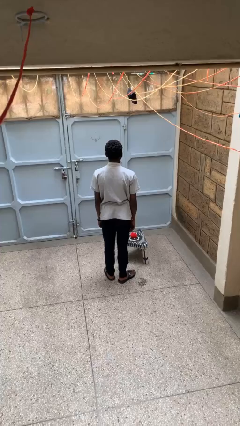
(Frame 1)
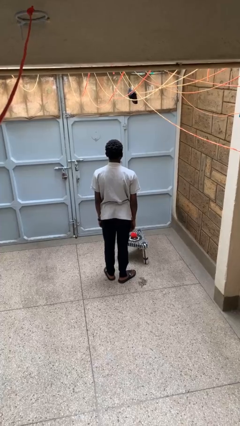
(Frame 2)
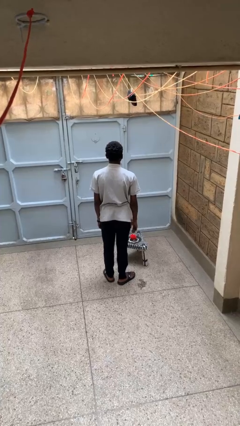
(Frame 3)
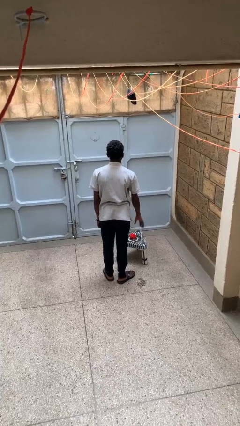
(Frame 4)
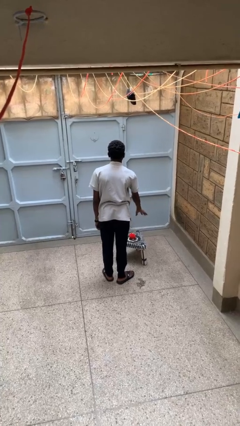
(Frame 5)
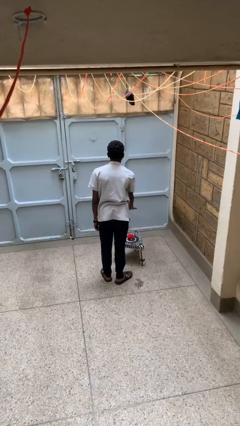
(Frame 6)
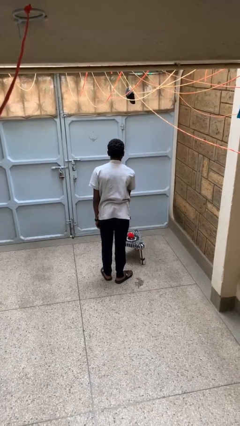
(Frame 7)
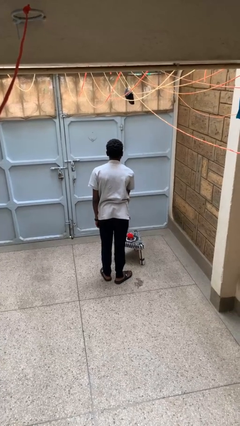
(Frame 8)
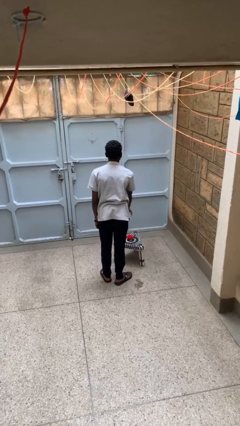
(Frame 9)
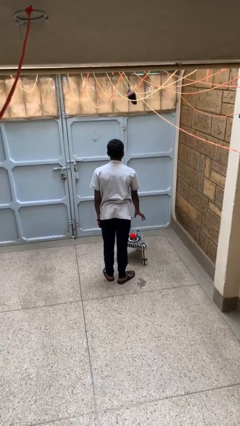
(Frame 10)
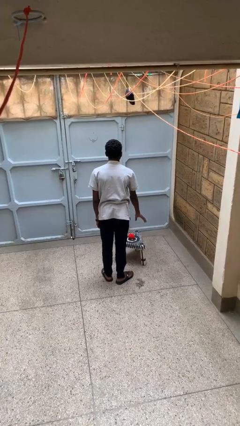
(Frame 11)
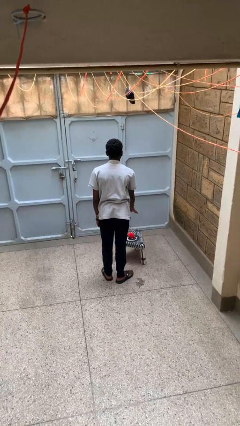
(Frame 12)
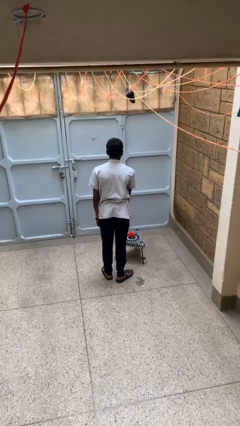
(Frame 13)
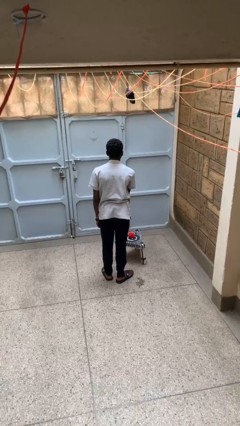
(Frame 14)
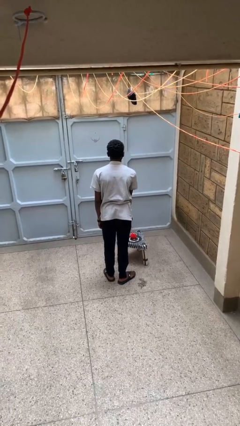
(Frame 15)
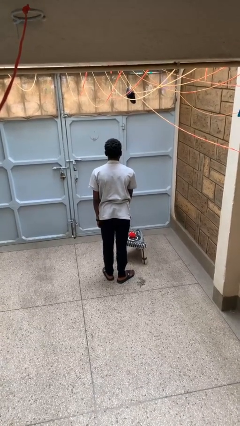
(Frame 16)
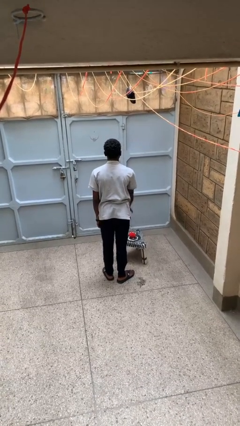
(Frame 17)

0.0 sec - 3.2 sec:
person waves hand over object

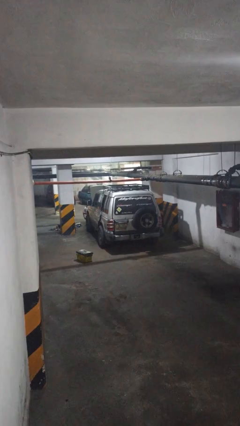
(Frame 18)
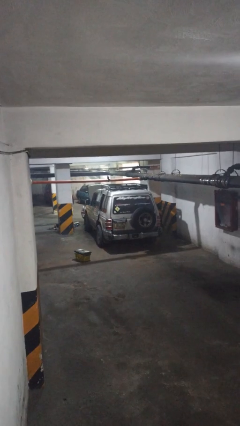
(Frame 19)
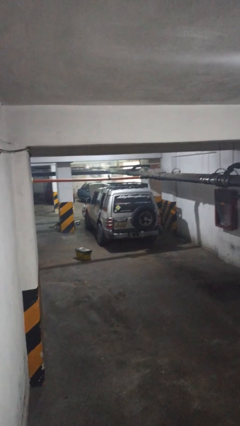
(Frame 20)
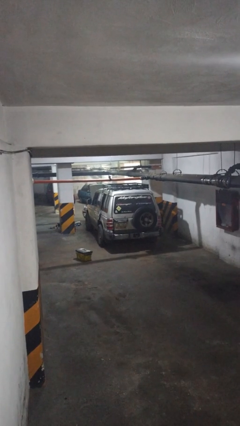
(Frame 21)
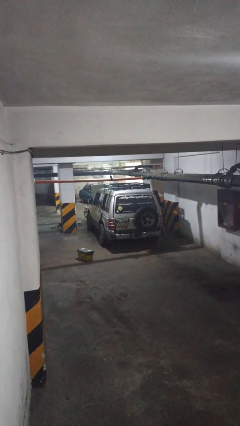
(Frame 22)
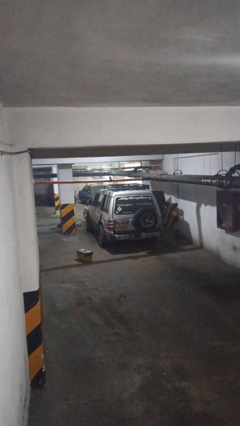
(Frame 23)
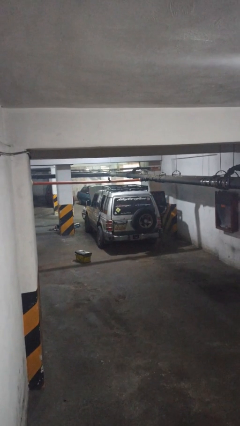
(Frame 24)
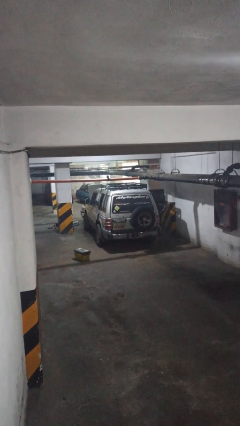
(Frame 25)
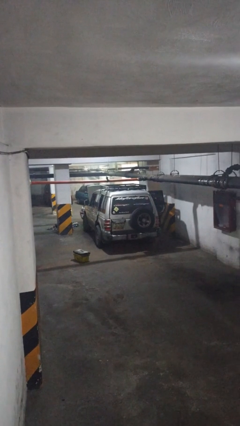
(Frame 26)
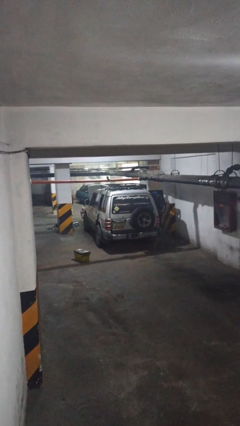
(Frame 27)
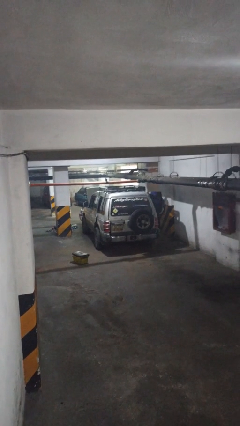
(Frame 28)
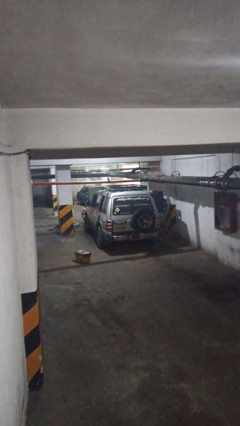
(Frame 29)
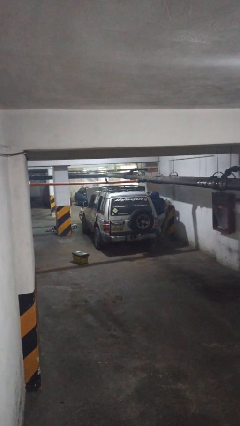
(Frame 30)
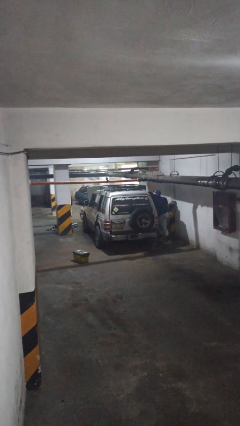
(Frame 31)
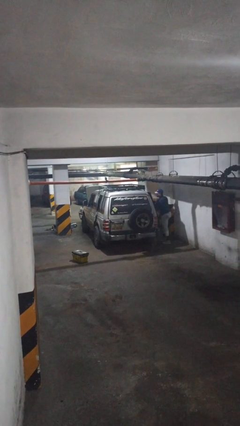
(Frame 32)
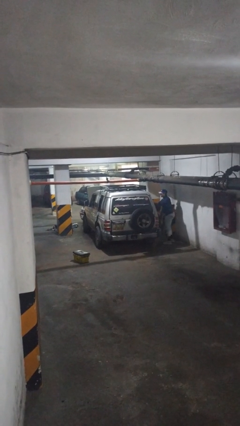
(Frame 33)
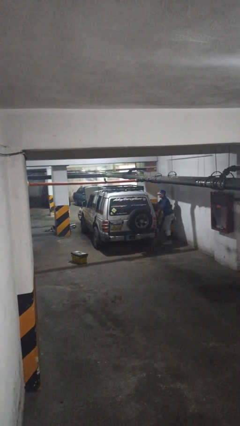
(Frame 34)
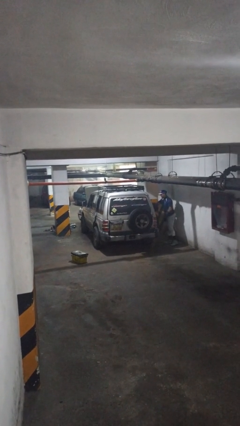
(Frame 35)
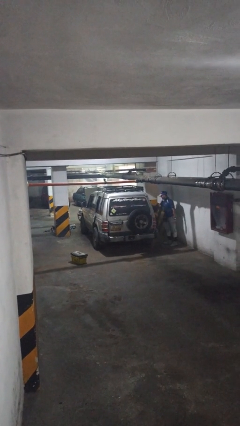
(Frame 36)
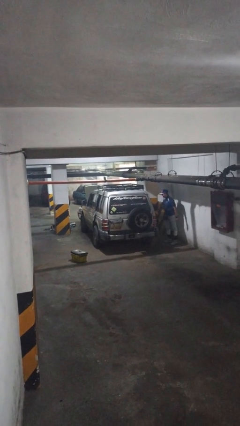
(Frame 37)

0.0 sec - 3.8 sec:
car drops off person

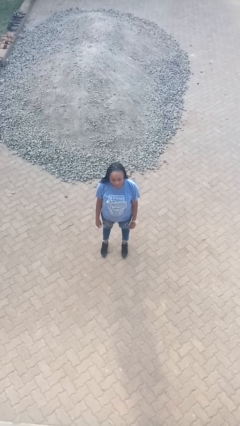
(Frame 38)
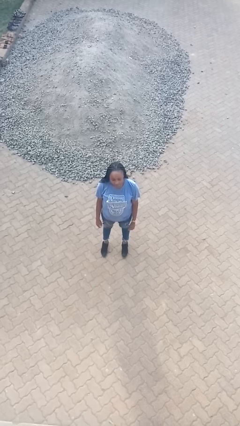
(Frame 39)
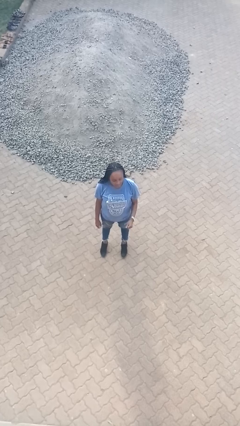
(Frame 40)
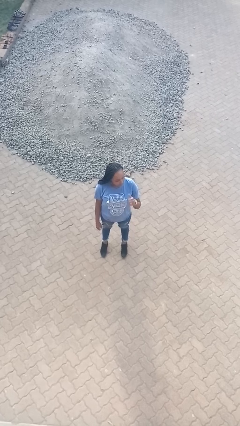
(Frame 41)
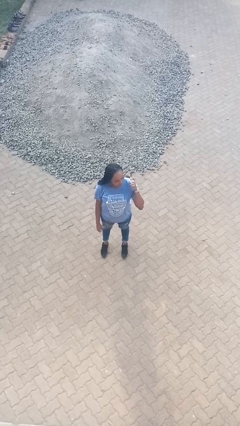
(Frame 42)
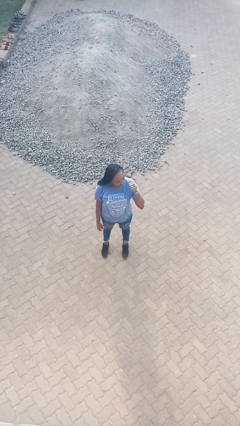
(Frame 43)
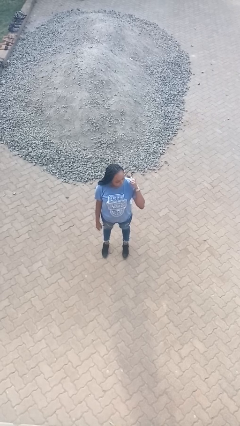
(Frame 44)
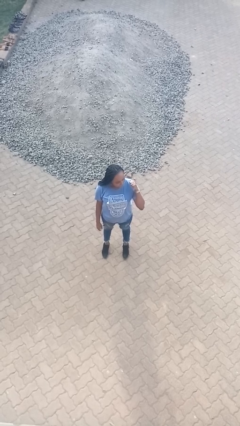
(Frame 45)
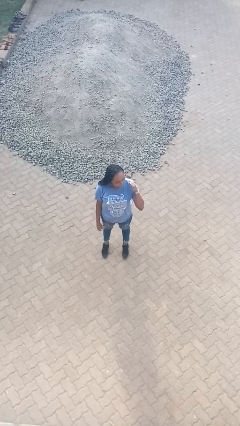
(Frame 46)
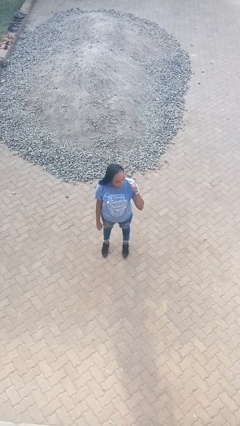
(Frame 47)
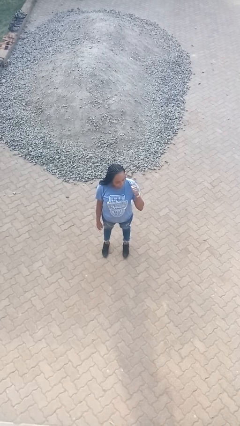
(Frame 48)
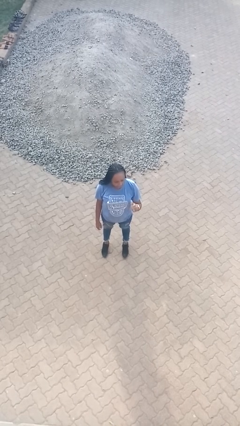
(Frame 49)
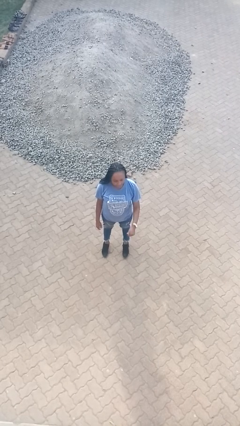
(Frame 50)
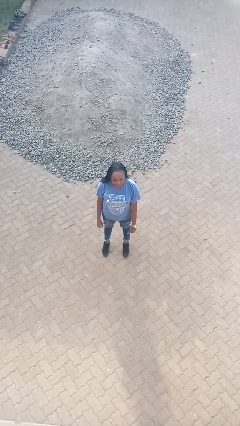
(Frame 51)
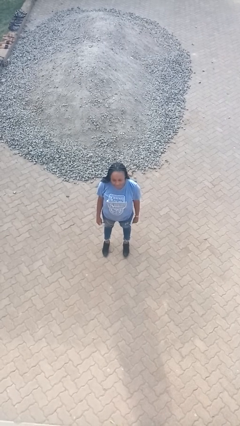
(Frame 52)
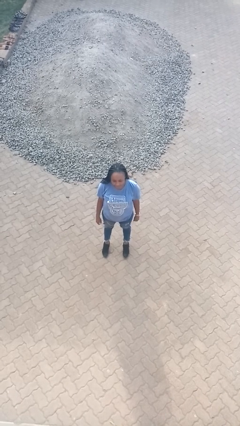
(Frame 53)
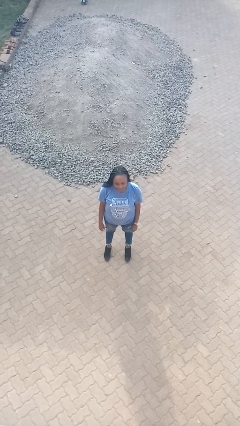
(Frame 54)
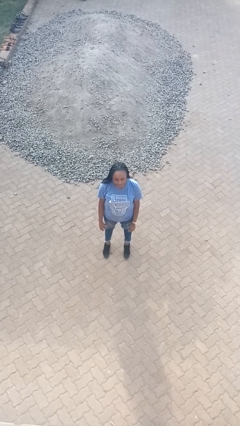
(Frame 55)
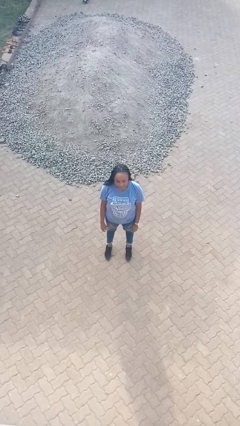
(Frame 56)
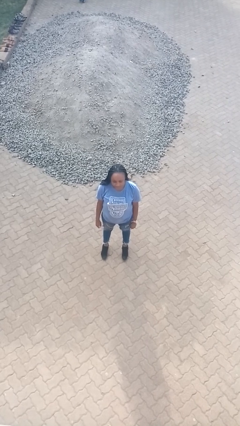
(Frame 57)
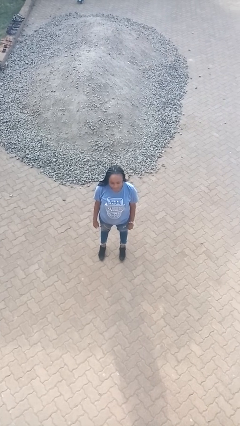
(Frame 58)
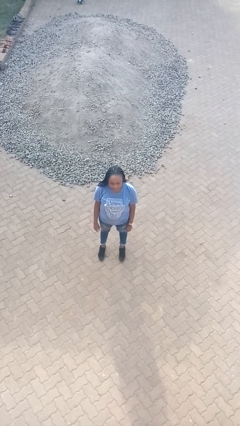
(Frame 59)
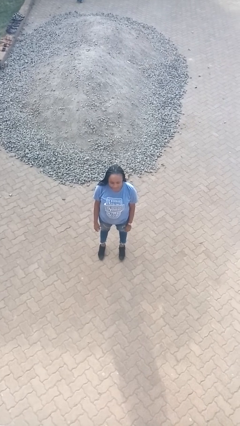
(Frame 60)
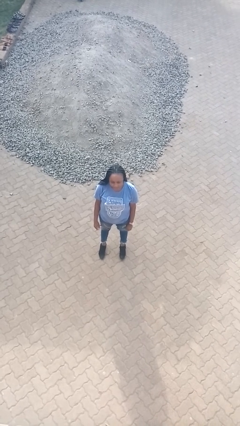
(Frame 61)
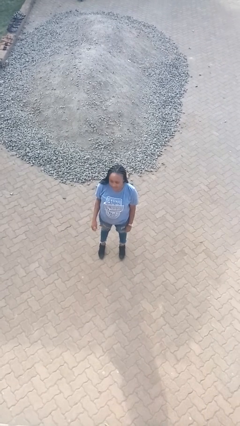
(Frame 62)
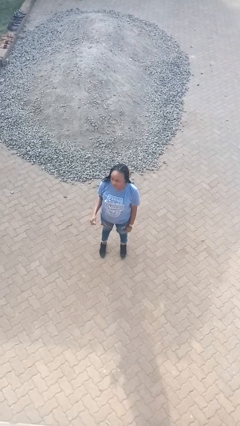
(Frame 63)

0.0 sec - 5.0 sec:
person gestures behind me

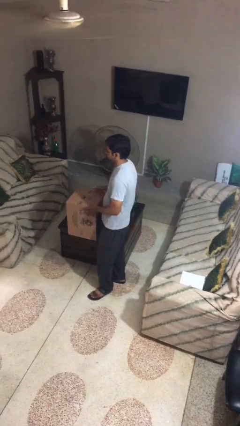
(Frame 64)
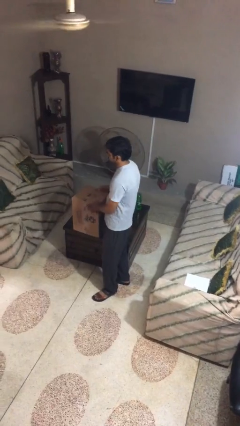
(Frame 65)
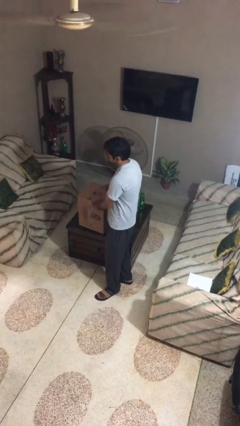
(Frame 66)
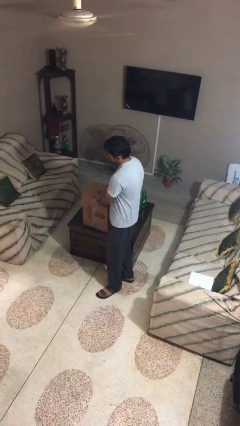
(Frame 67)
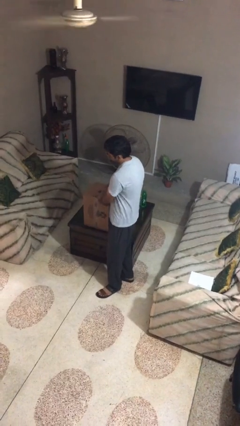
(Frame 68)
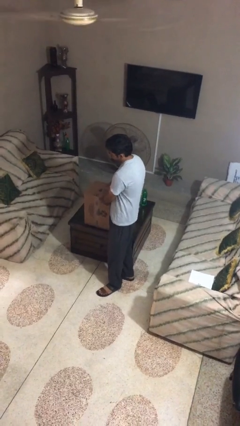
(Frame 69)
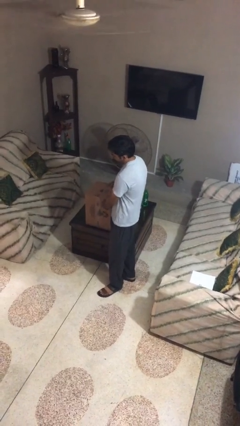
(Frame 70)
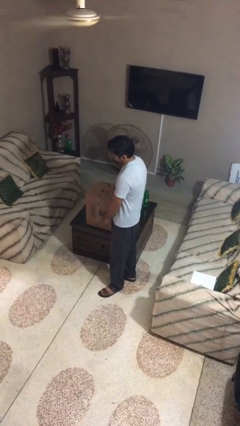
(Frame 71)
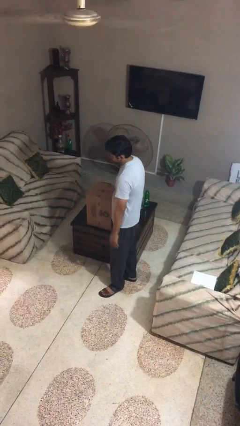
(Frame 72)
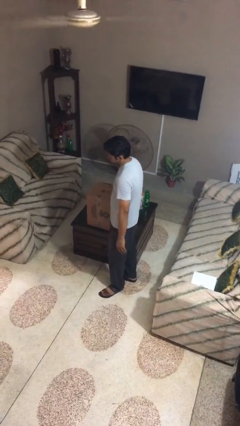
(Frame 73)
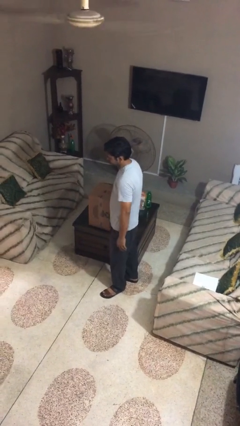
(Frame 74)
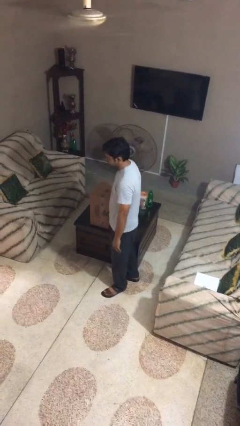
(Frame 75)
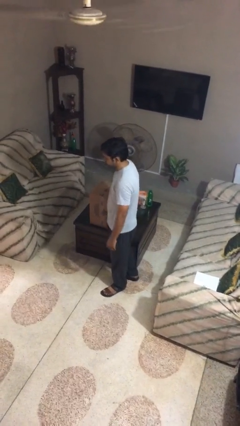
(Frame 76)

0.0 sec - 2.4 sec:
person puts down object on table

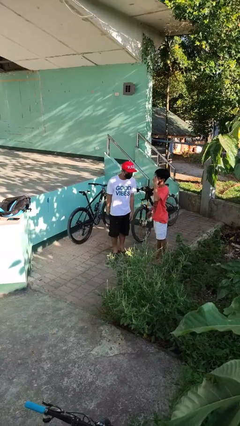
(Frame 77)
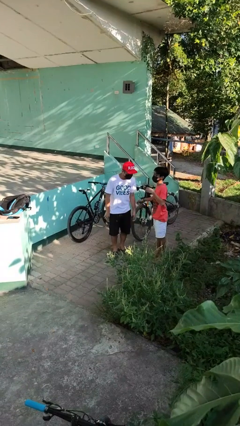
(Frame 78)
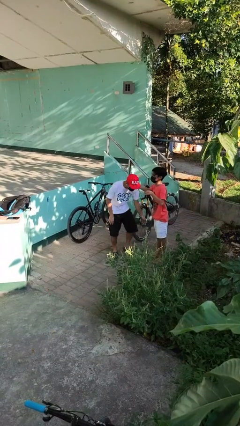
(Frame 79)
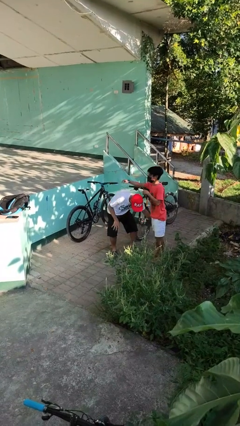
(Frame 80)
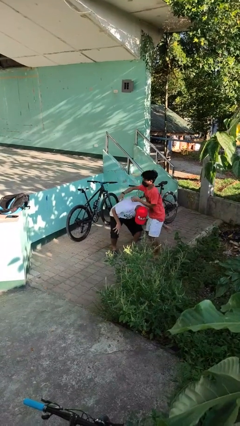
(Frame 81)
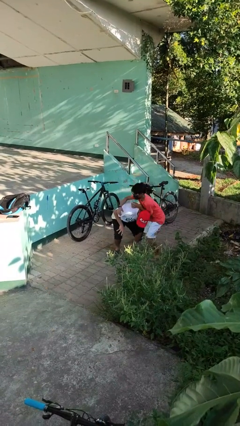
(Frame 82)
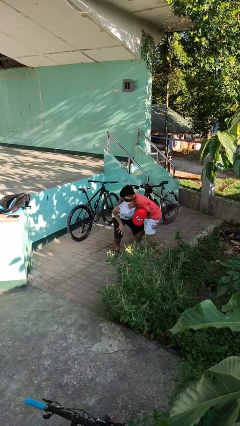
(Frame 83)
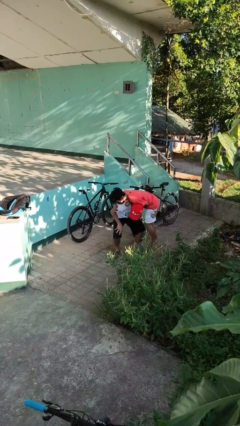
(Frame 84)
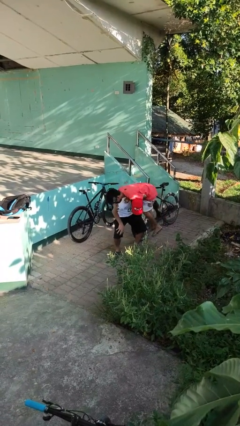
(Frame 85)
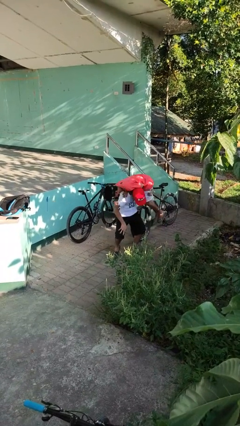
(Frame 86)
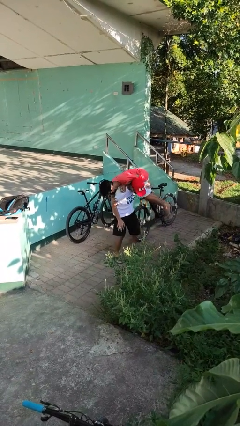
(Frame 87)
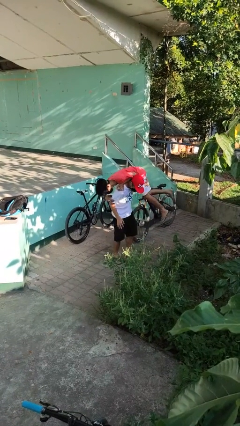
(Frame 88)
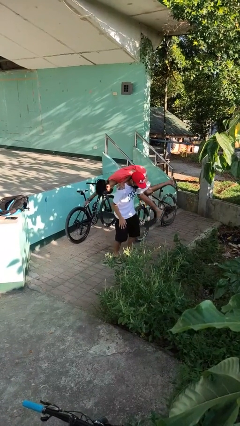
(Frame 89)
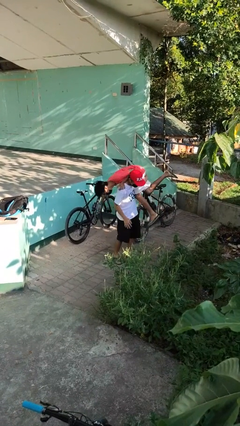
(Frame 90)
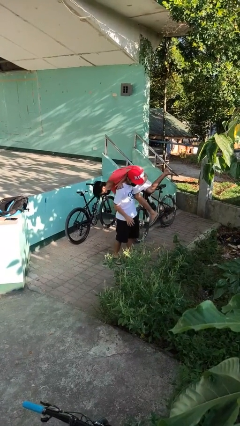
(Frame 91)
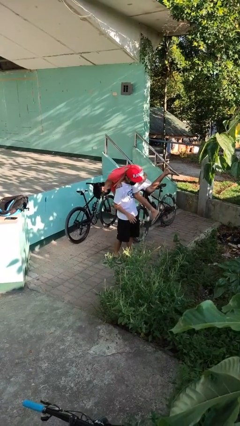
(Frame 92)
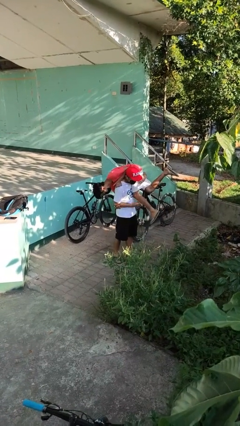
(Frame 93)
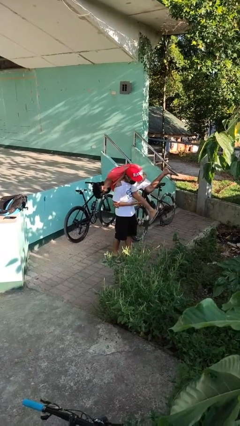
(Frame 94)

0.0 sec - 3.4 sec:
person carries person over shoulder
